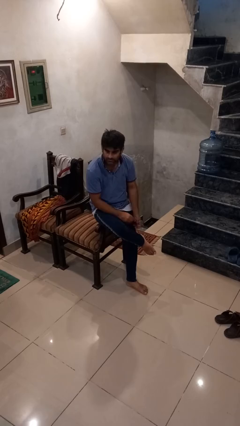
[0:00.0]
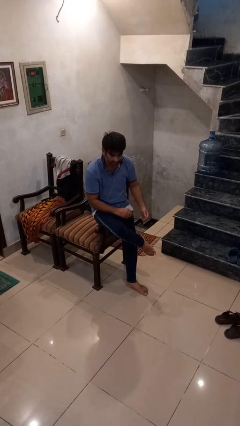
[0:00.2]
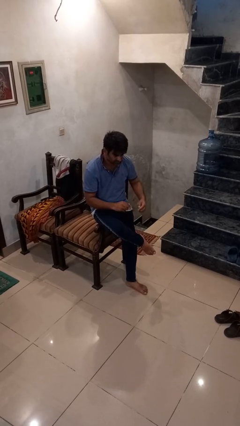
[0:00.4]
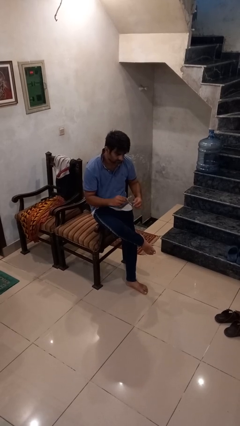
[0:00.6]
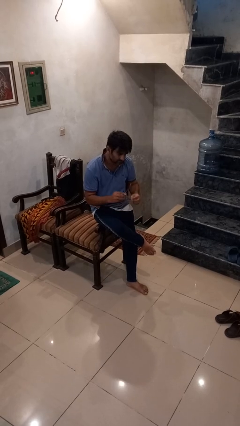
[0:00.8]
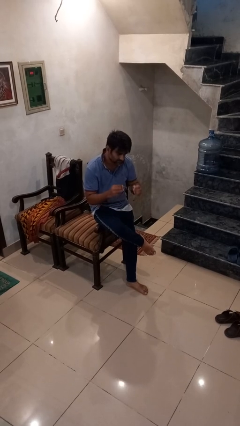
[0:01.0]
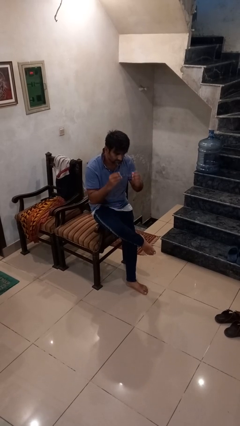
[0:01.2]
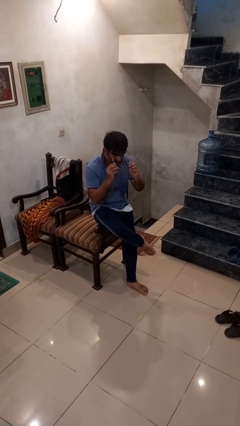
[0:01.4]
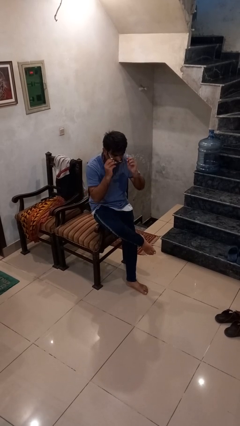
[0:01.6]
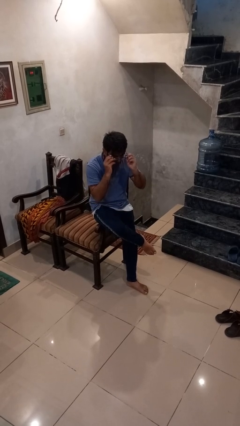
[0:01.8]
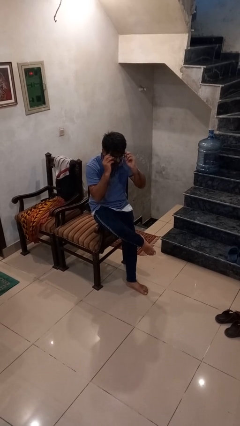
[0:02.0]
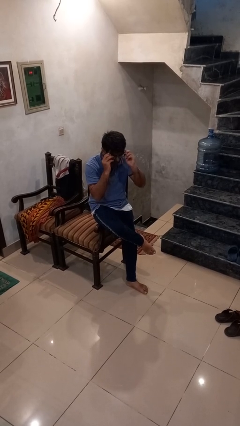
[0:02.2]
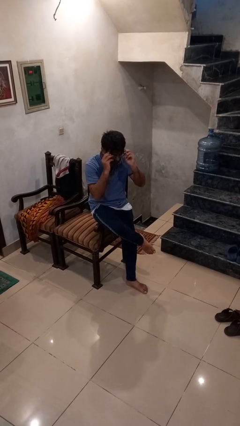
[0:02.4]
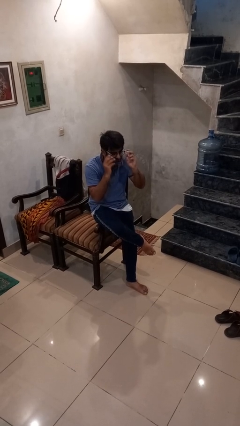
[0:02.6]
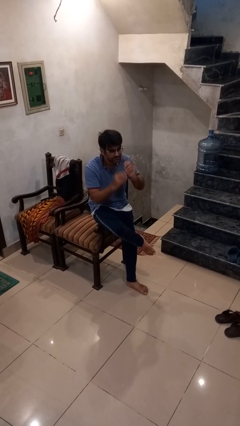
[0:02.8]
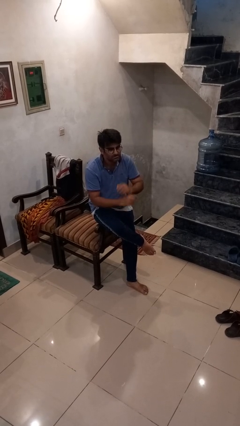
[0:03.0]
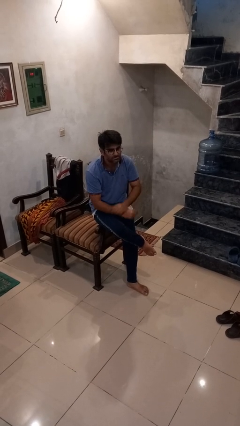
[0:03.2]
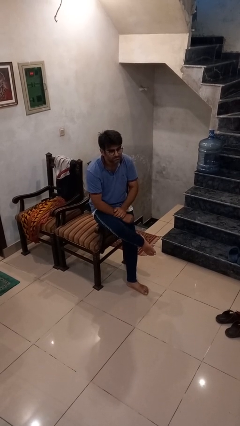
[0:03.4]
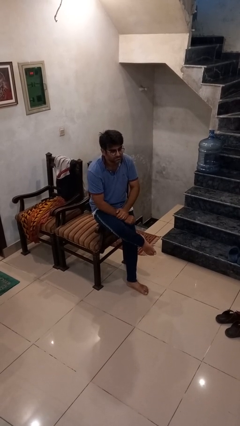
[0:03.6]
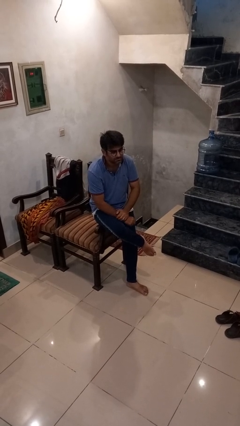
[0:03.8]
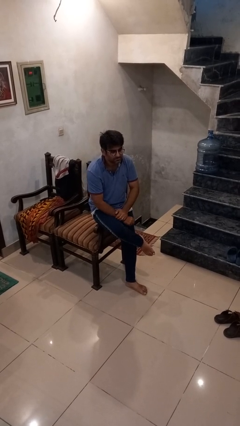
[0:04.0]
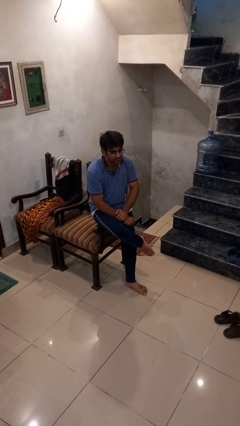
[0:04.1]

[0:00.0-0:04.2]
person puts on glasses

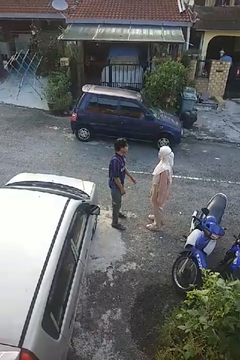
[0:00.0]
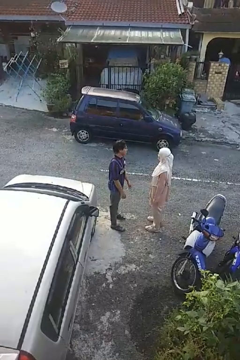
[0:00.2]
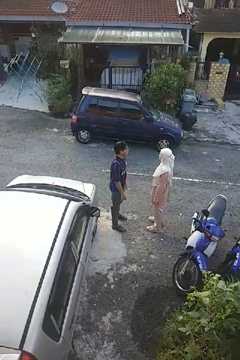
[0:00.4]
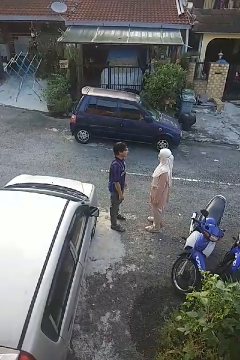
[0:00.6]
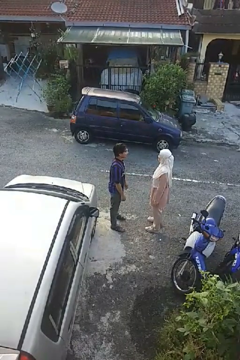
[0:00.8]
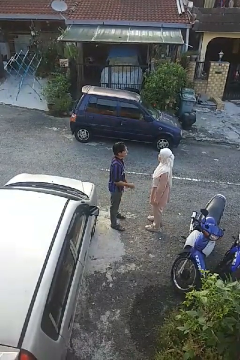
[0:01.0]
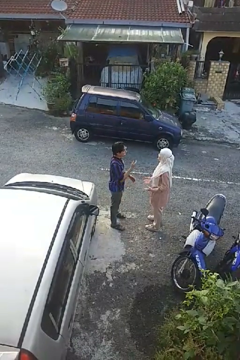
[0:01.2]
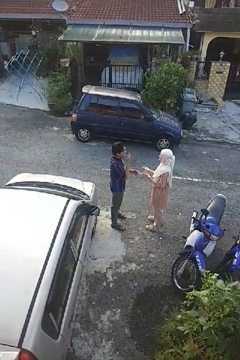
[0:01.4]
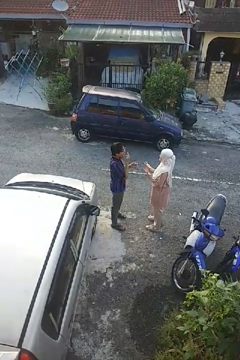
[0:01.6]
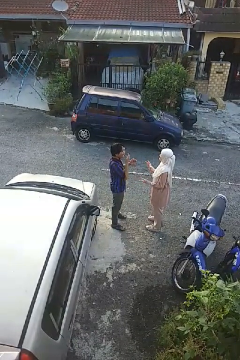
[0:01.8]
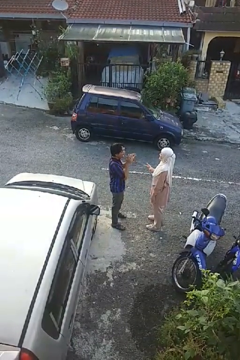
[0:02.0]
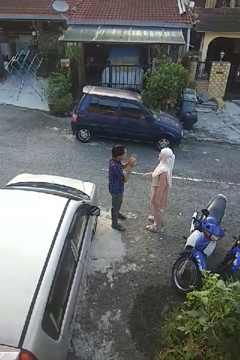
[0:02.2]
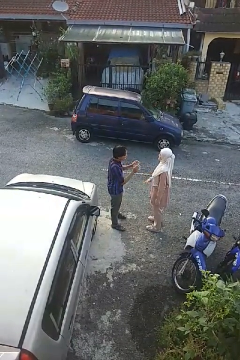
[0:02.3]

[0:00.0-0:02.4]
person laughs with person

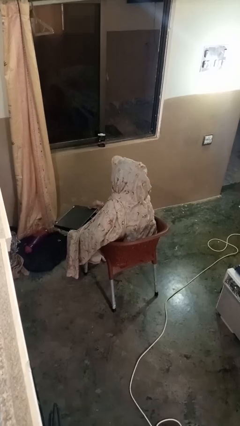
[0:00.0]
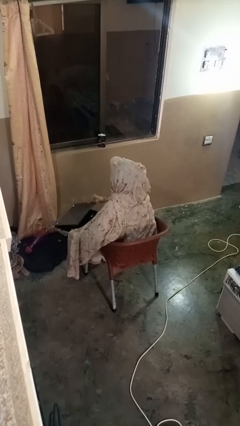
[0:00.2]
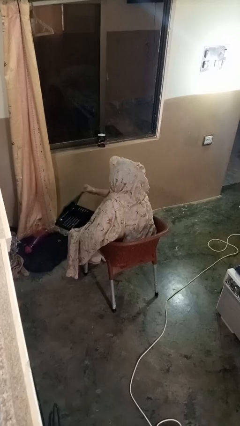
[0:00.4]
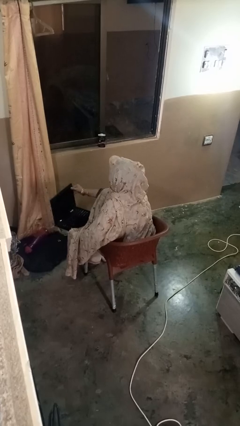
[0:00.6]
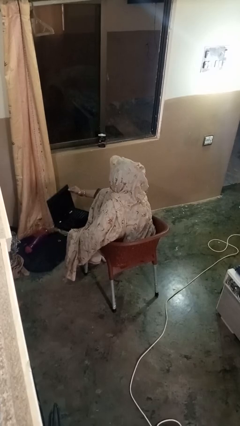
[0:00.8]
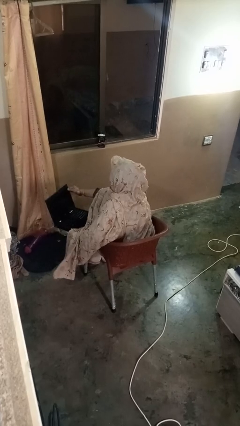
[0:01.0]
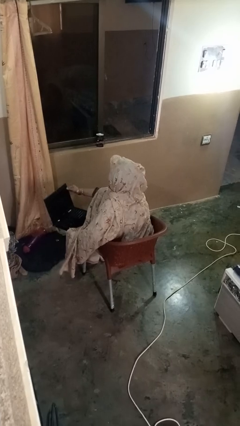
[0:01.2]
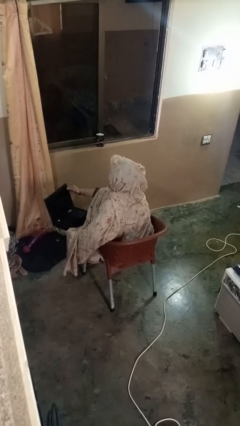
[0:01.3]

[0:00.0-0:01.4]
person opens laptop

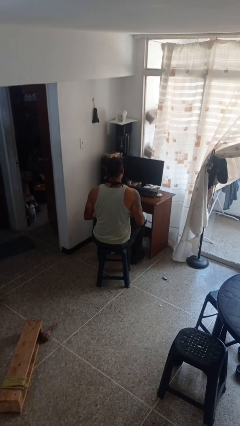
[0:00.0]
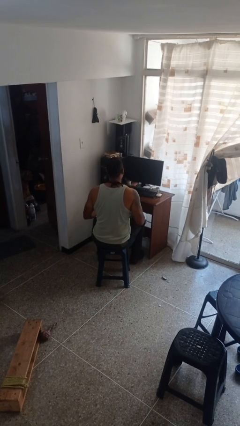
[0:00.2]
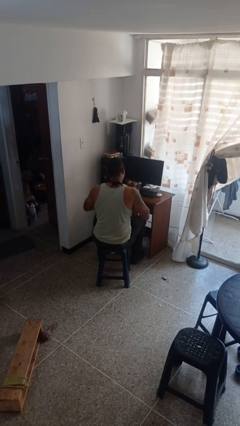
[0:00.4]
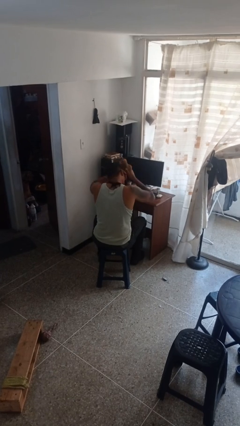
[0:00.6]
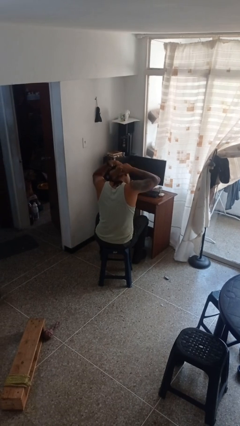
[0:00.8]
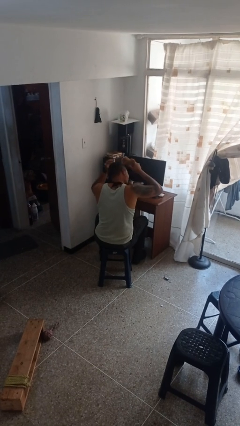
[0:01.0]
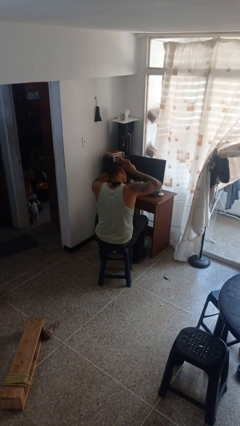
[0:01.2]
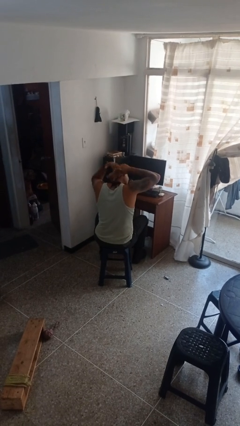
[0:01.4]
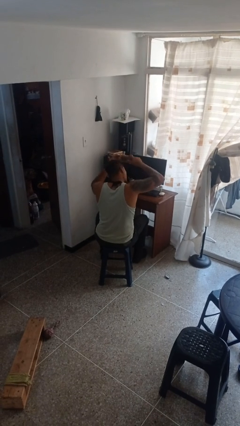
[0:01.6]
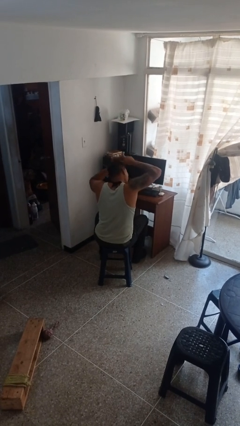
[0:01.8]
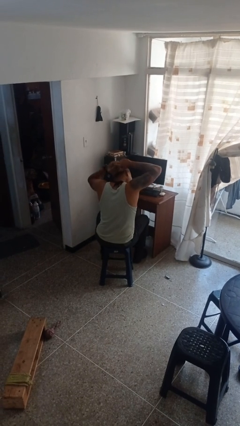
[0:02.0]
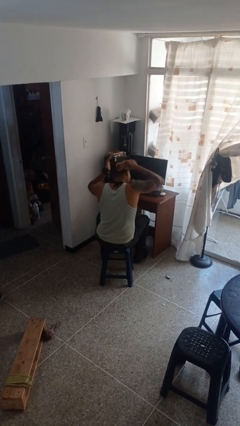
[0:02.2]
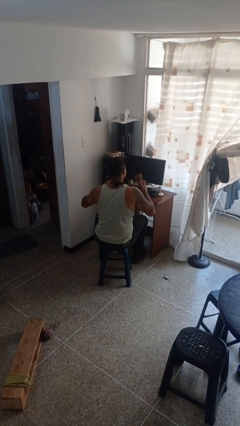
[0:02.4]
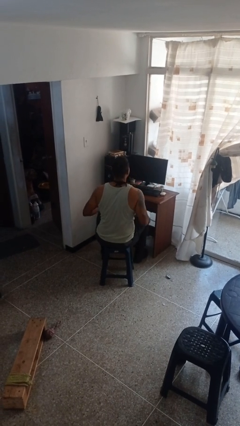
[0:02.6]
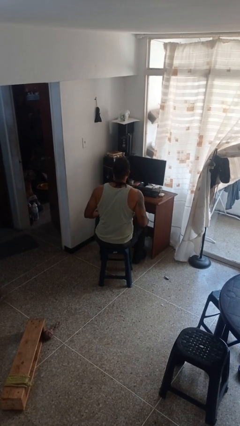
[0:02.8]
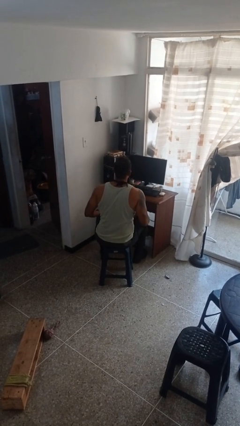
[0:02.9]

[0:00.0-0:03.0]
person brushes hair

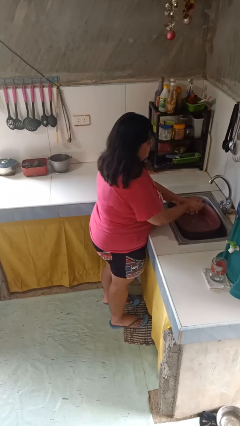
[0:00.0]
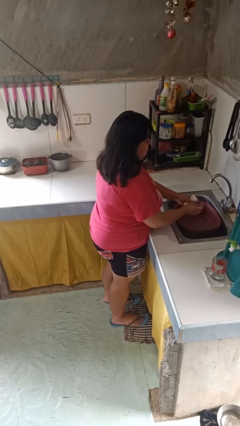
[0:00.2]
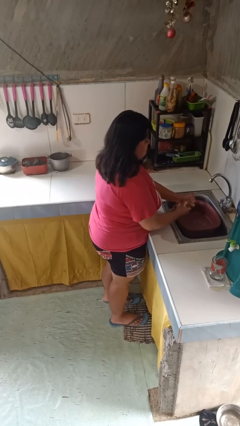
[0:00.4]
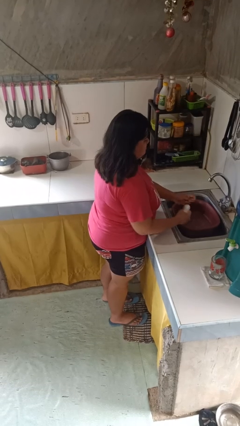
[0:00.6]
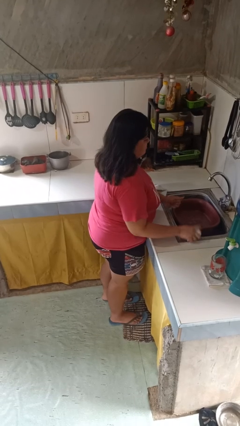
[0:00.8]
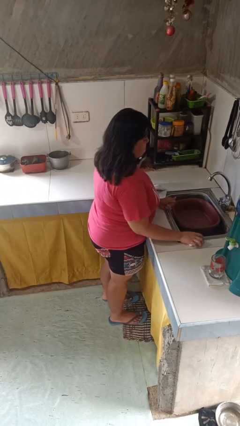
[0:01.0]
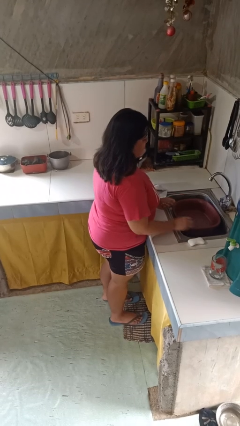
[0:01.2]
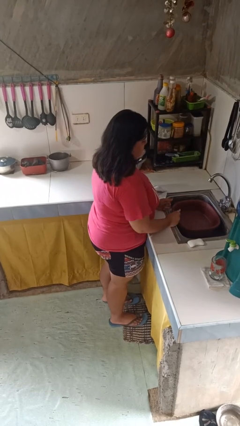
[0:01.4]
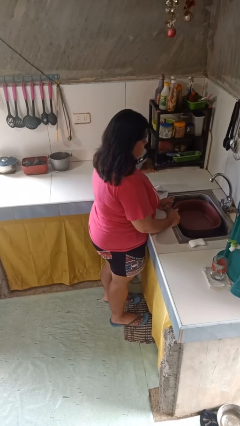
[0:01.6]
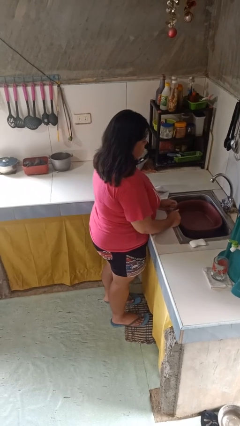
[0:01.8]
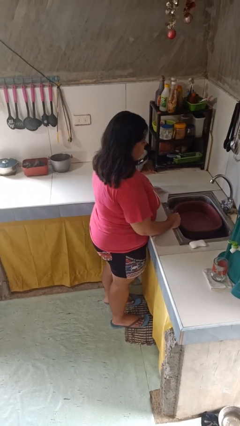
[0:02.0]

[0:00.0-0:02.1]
person washes hands

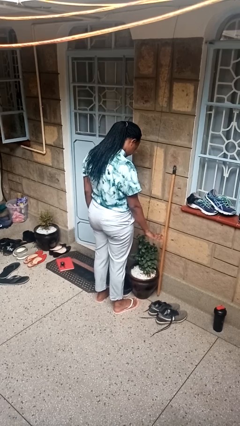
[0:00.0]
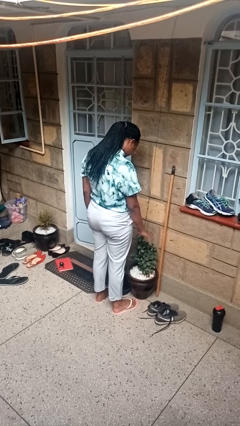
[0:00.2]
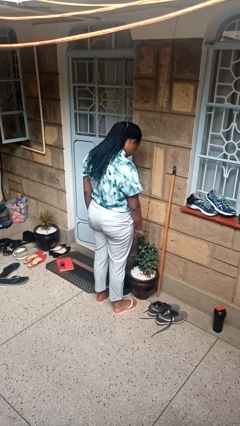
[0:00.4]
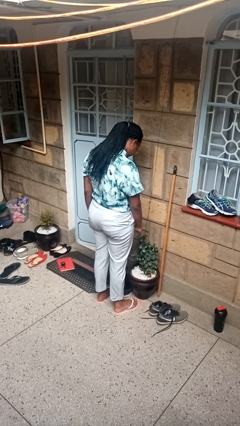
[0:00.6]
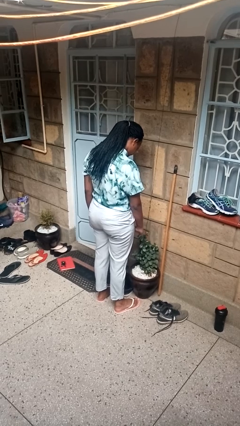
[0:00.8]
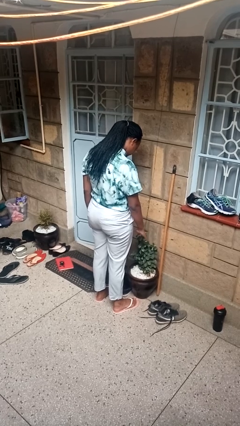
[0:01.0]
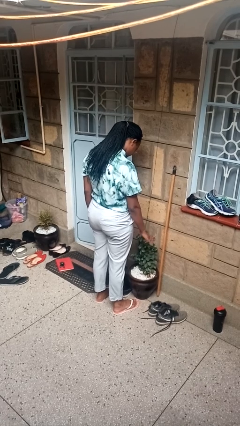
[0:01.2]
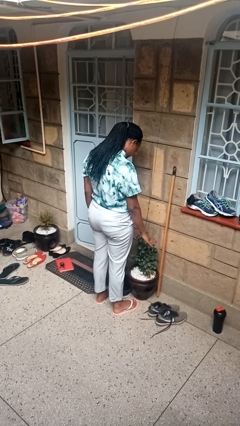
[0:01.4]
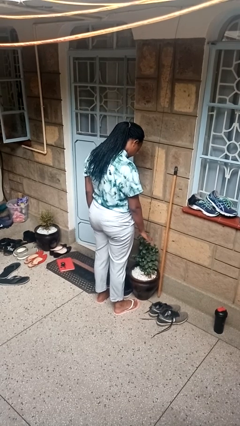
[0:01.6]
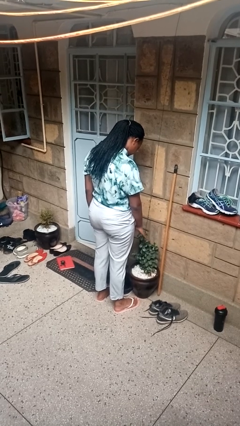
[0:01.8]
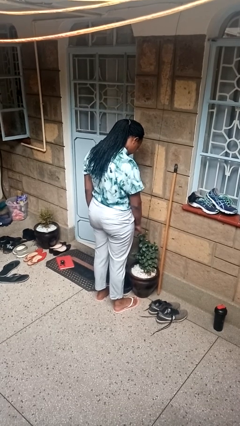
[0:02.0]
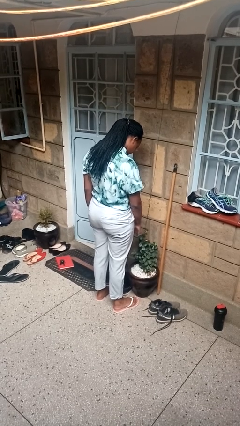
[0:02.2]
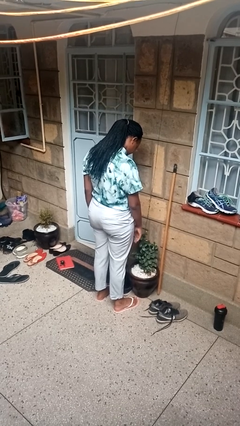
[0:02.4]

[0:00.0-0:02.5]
person waves hand over object

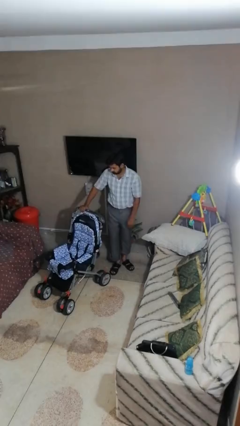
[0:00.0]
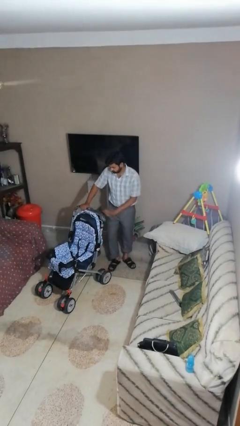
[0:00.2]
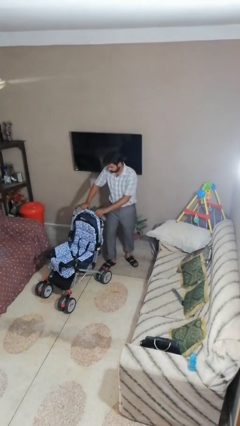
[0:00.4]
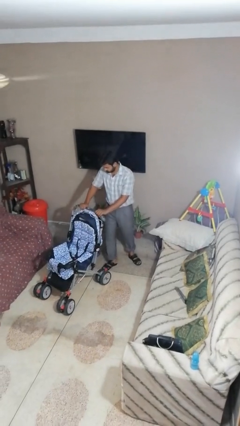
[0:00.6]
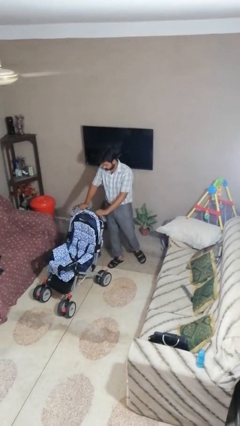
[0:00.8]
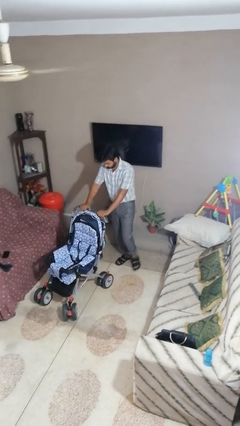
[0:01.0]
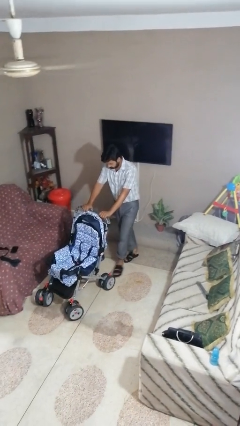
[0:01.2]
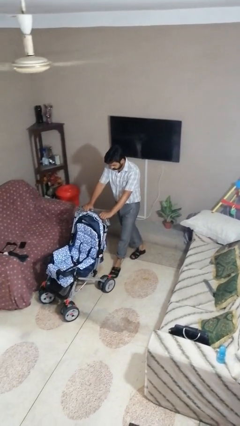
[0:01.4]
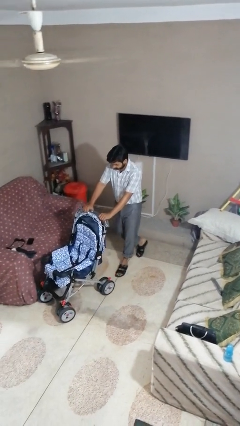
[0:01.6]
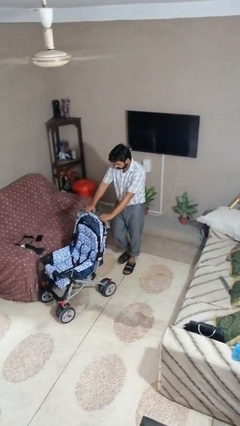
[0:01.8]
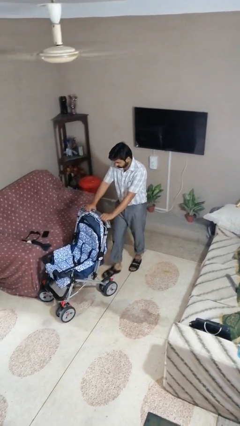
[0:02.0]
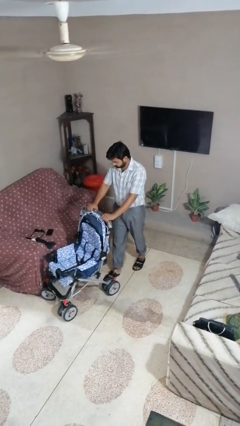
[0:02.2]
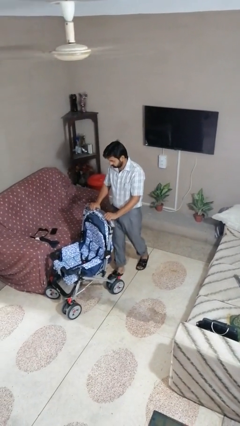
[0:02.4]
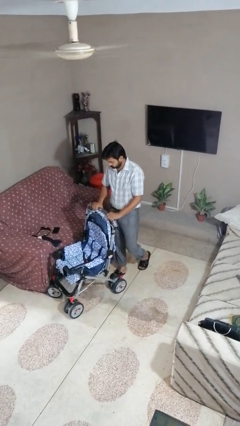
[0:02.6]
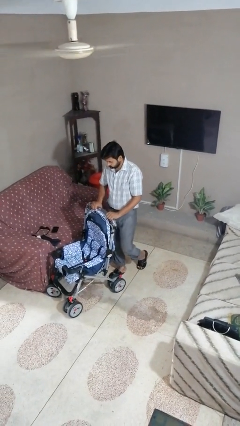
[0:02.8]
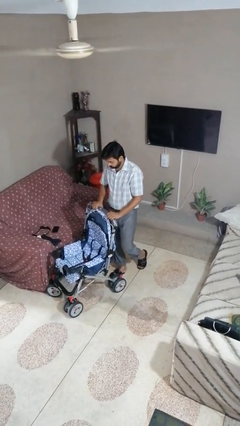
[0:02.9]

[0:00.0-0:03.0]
person pushes wheeled cart
